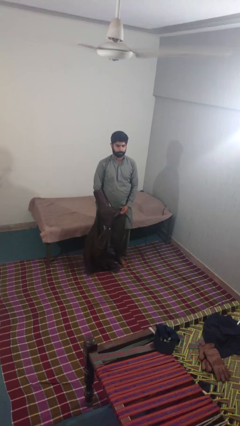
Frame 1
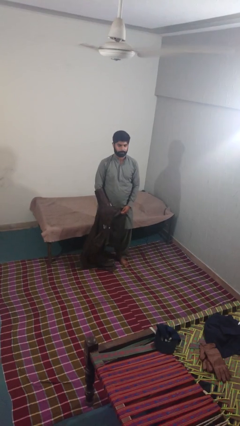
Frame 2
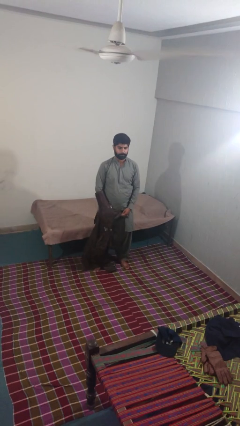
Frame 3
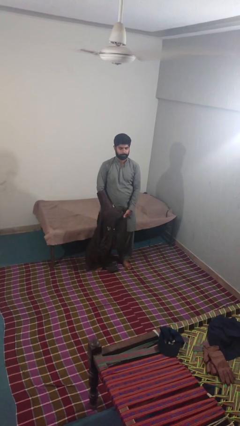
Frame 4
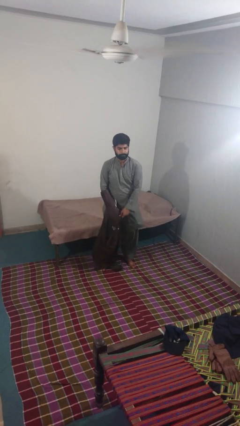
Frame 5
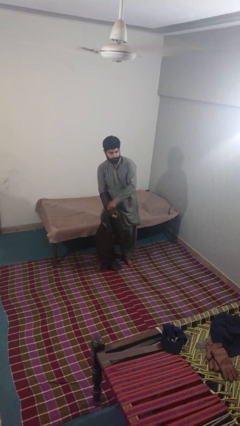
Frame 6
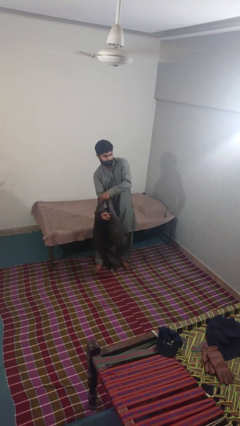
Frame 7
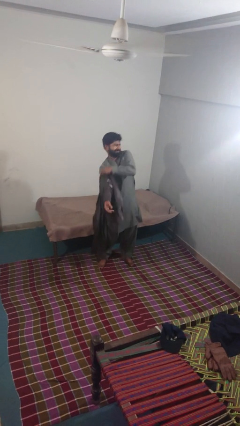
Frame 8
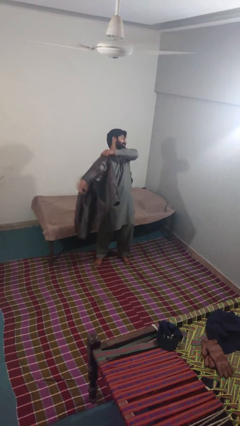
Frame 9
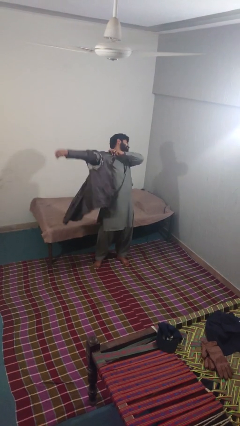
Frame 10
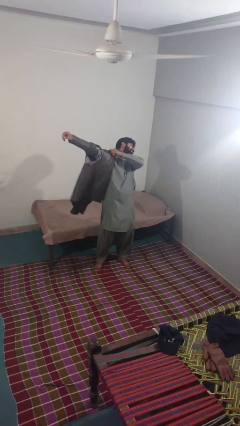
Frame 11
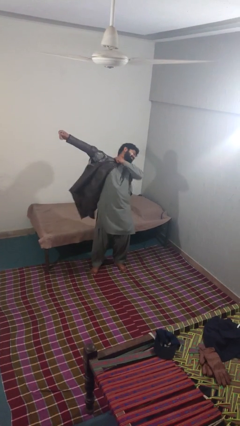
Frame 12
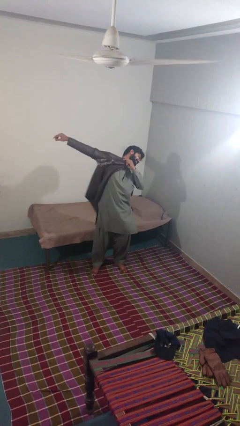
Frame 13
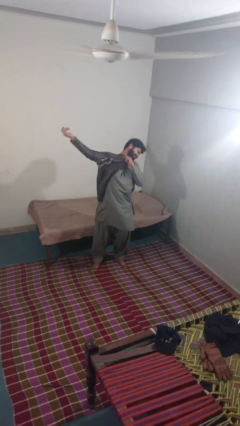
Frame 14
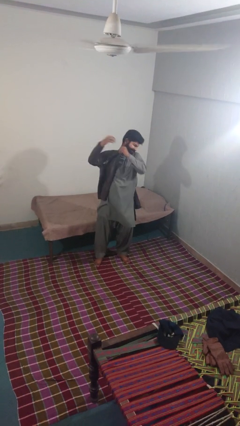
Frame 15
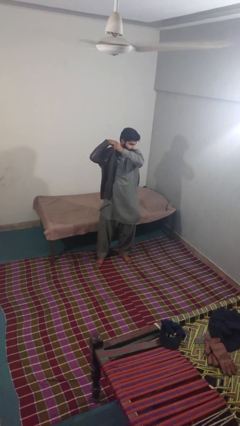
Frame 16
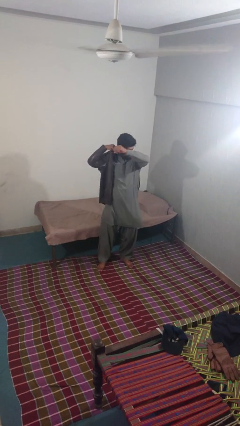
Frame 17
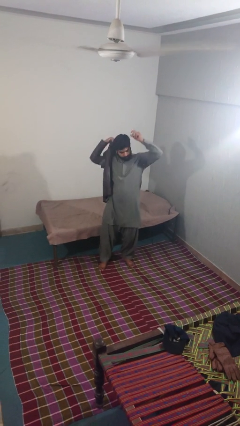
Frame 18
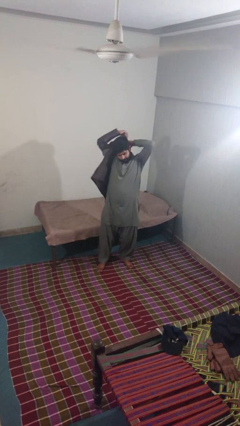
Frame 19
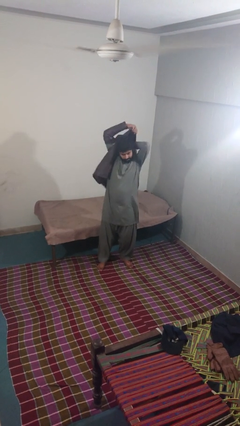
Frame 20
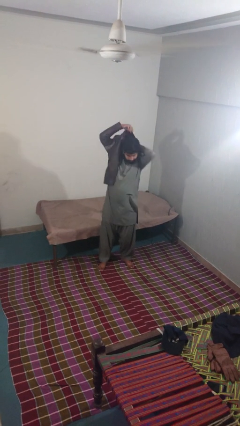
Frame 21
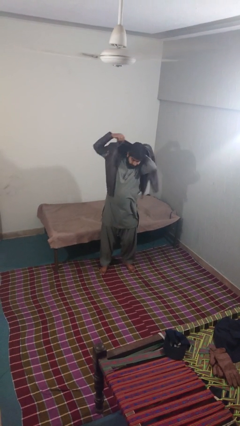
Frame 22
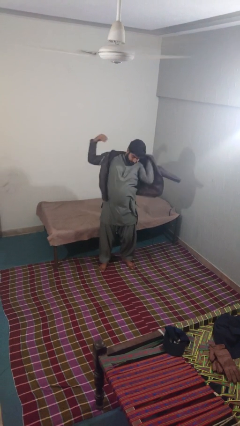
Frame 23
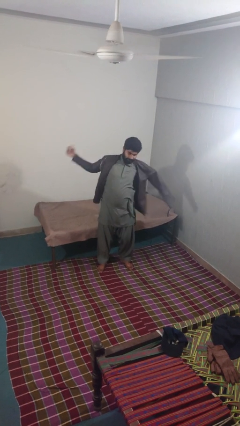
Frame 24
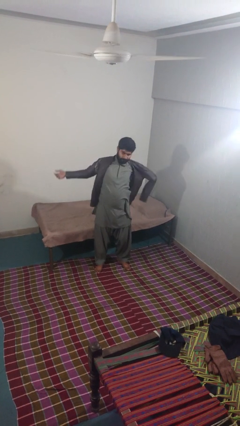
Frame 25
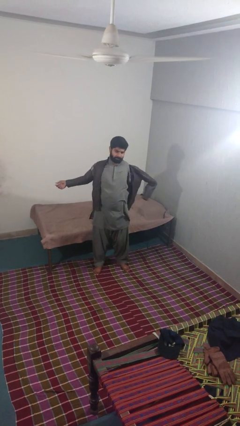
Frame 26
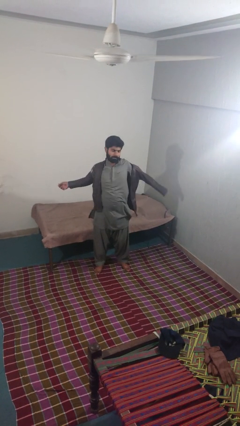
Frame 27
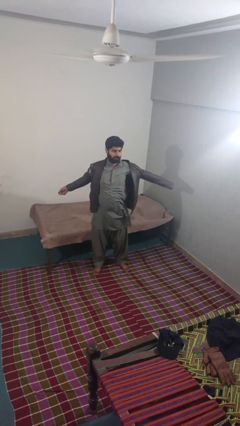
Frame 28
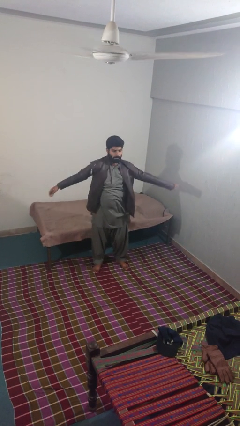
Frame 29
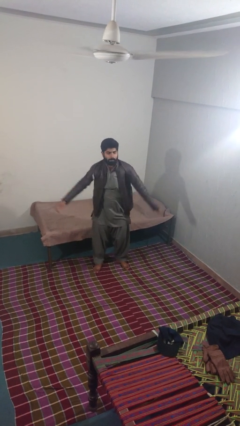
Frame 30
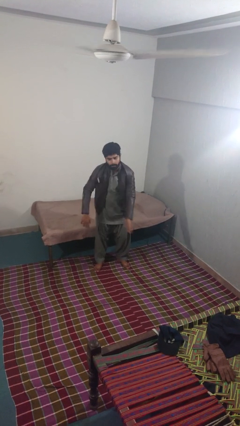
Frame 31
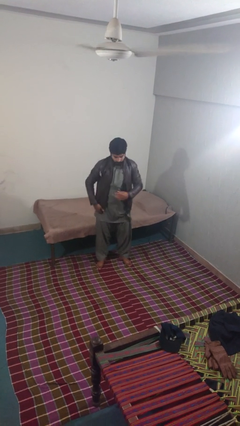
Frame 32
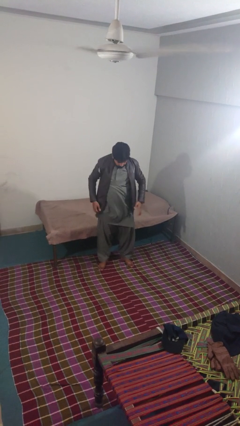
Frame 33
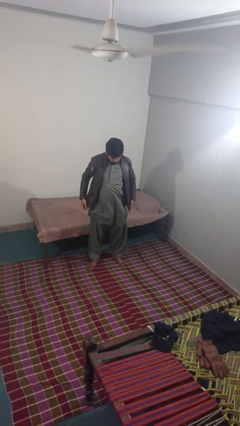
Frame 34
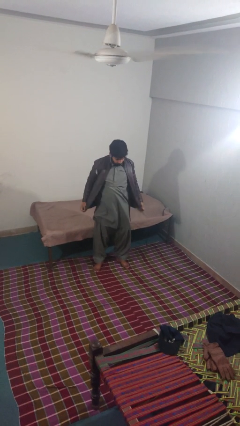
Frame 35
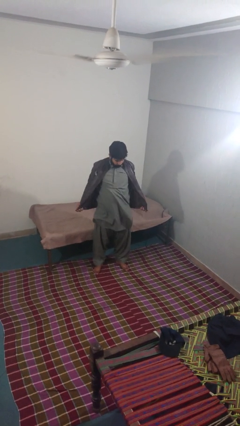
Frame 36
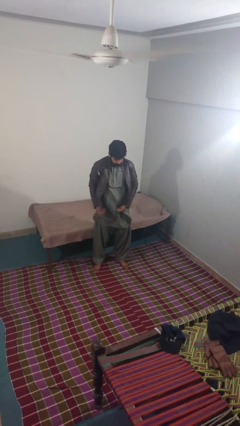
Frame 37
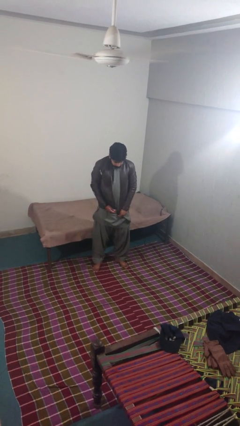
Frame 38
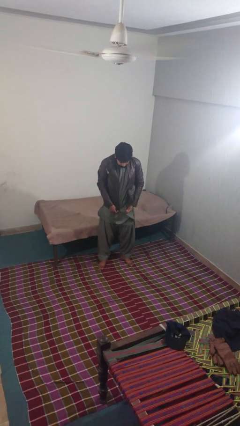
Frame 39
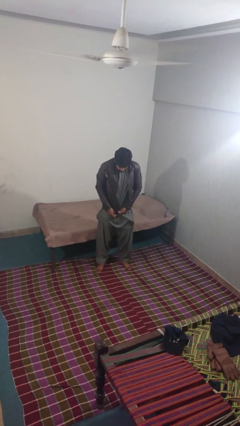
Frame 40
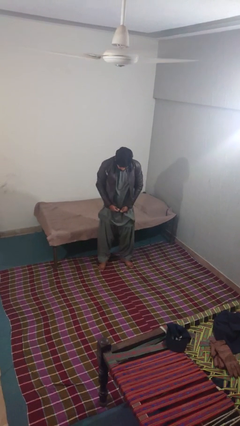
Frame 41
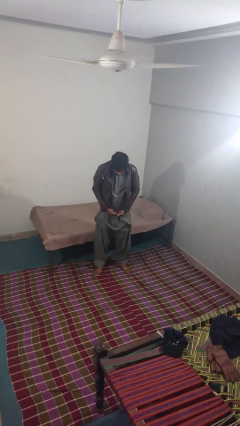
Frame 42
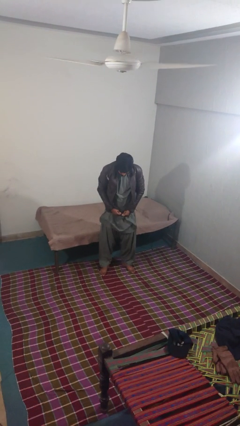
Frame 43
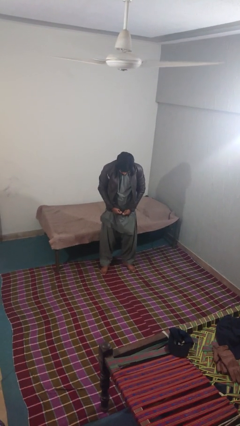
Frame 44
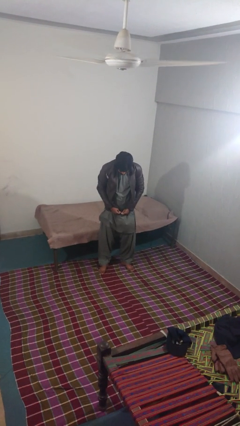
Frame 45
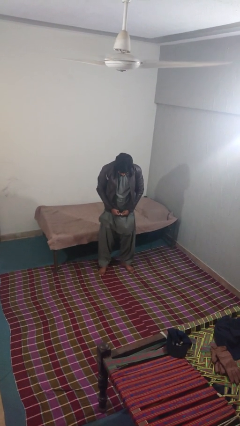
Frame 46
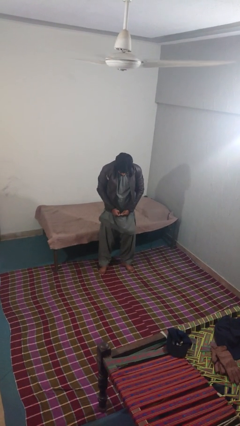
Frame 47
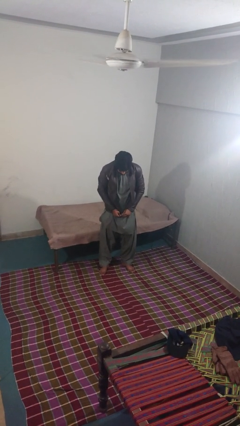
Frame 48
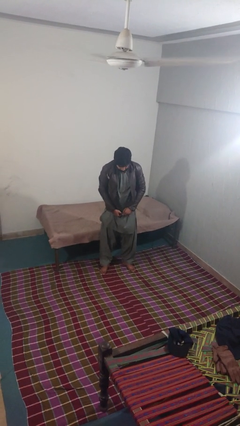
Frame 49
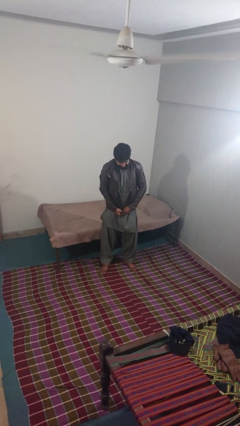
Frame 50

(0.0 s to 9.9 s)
person puts on jacket

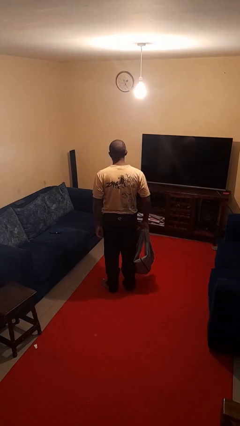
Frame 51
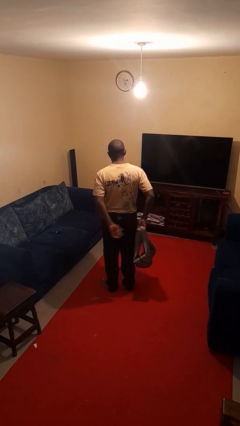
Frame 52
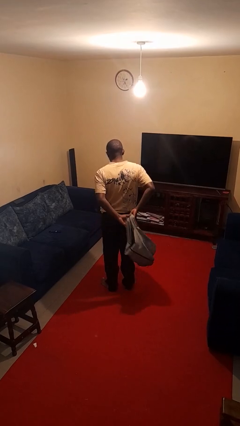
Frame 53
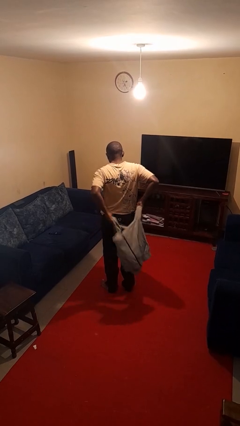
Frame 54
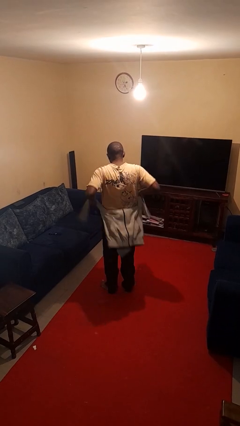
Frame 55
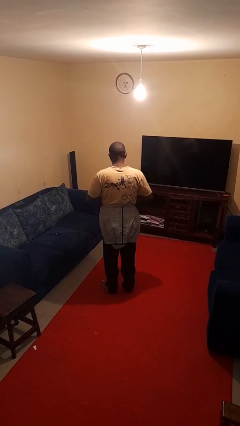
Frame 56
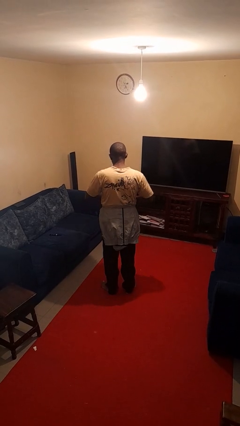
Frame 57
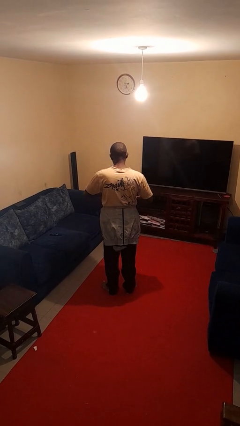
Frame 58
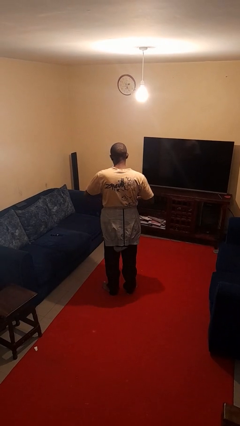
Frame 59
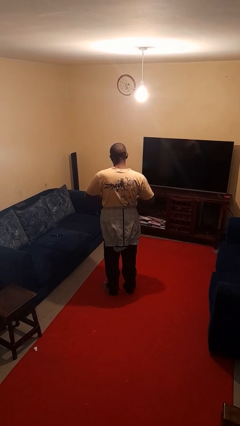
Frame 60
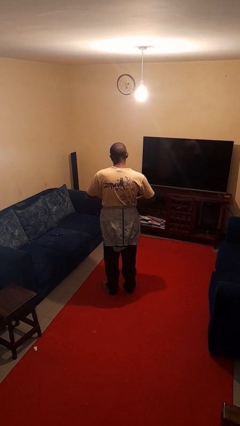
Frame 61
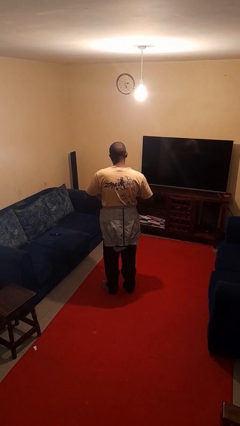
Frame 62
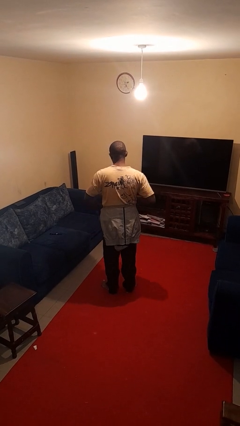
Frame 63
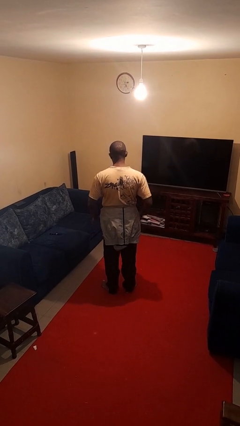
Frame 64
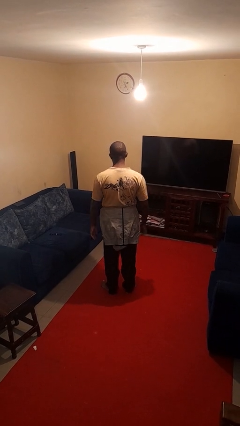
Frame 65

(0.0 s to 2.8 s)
person ties jacket around waist

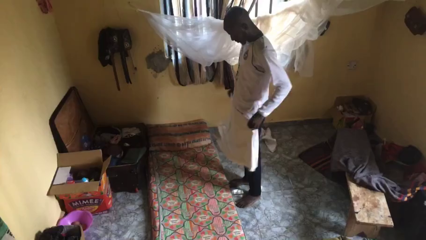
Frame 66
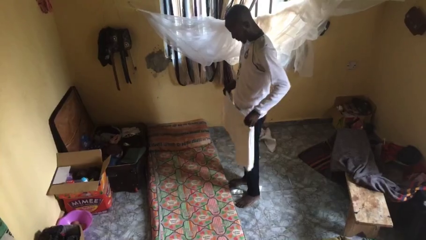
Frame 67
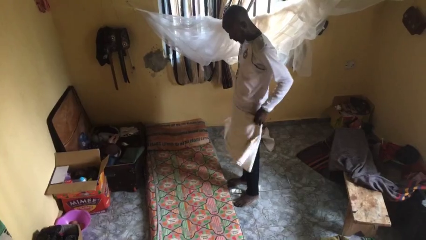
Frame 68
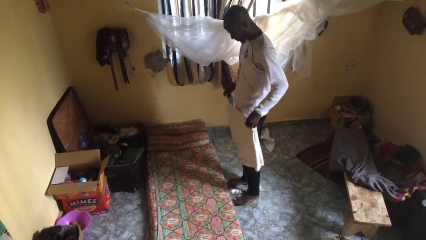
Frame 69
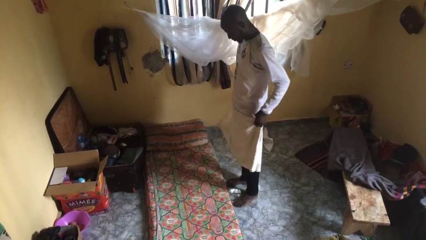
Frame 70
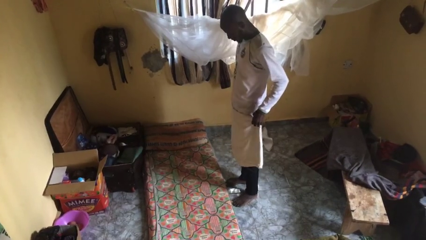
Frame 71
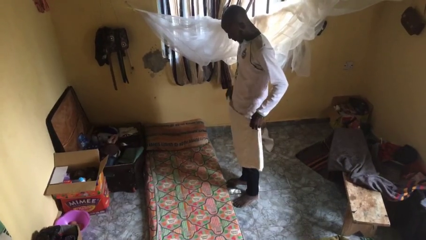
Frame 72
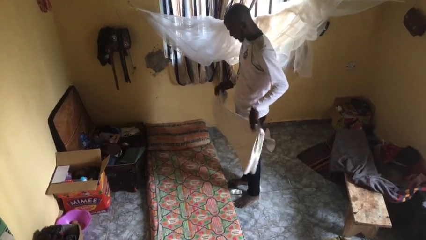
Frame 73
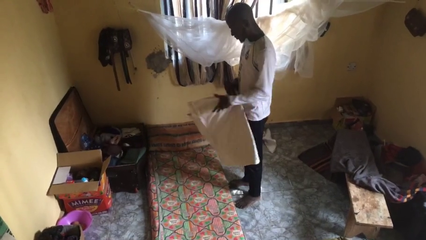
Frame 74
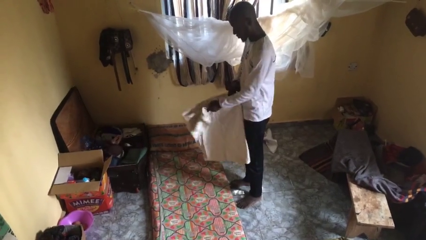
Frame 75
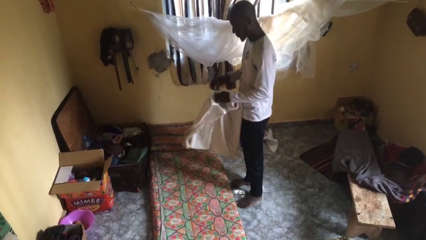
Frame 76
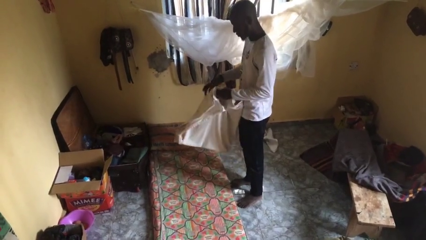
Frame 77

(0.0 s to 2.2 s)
person unfolds blanket

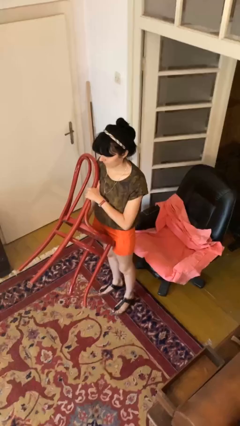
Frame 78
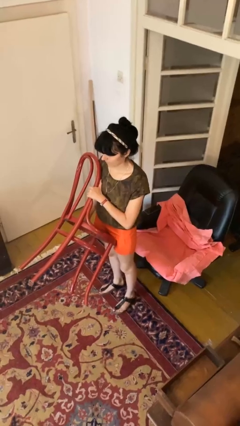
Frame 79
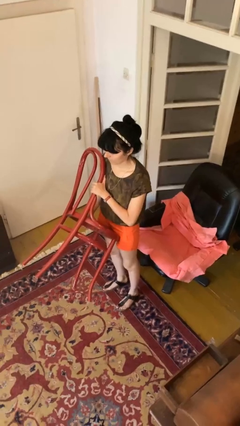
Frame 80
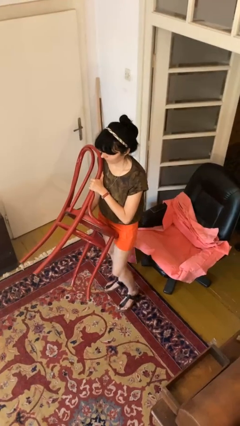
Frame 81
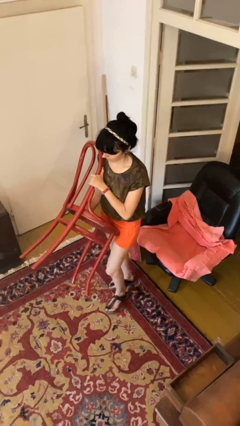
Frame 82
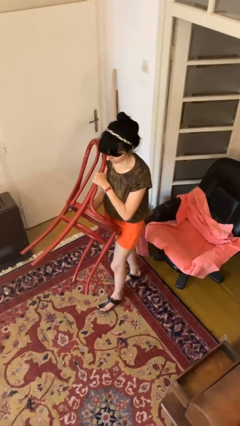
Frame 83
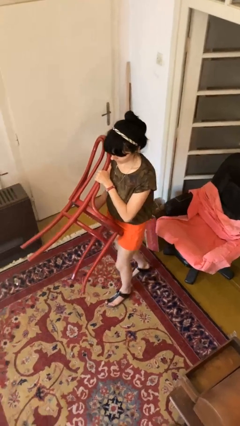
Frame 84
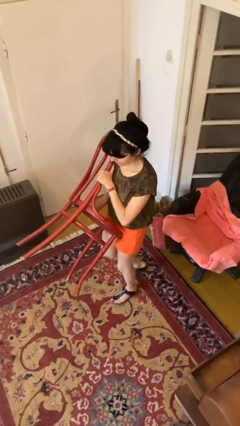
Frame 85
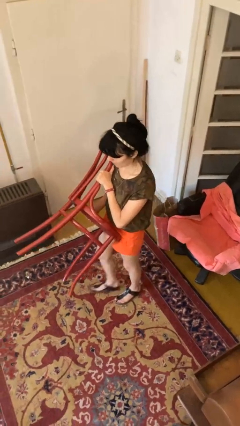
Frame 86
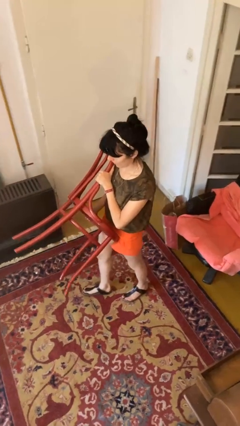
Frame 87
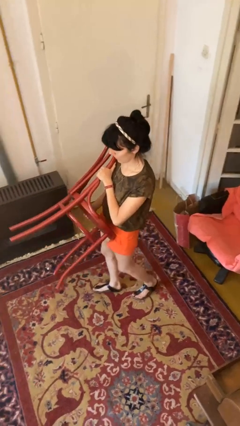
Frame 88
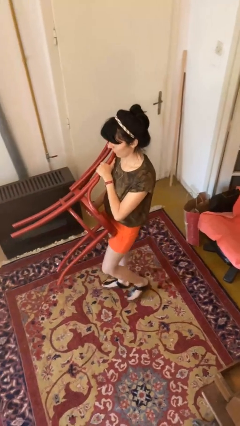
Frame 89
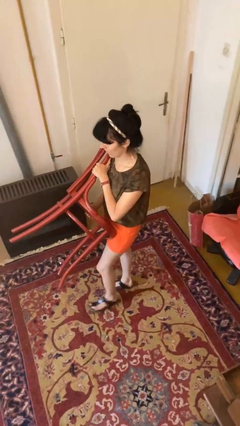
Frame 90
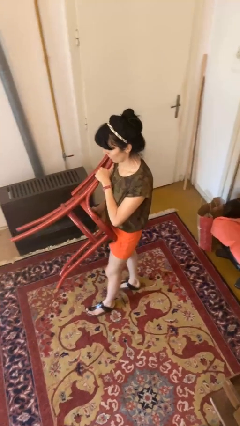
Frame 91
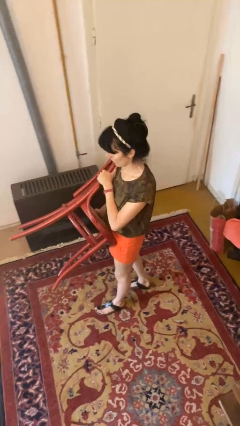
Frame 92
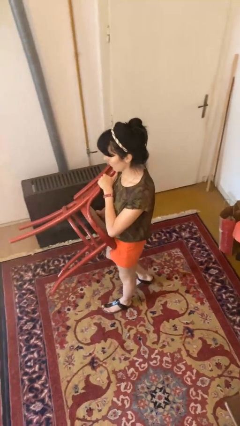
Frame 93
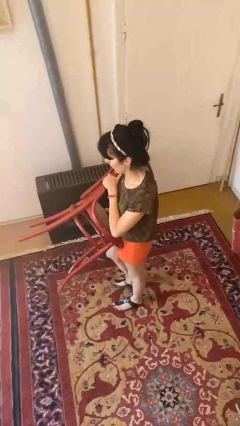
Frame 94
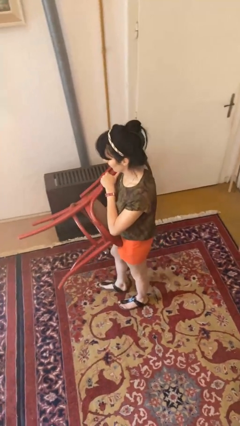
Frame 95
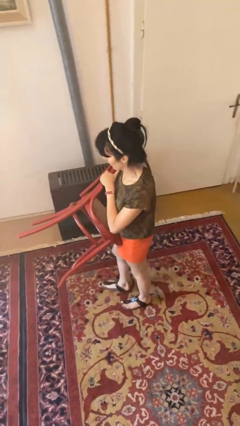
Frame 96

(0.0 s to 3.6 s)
person carries furniture
